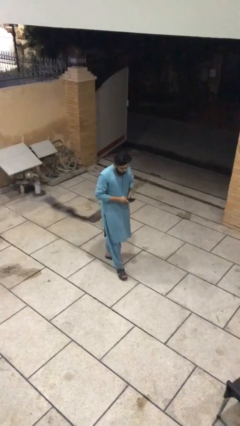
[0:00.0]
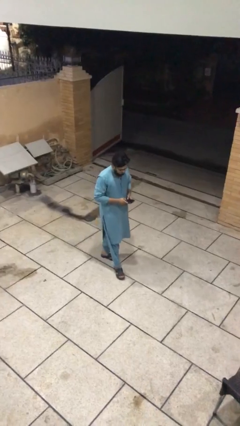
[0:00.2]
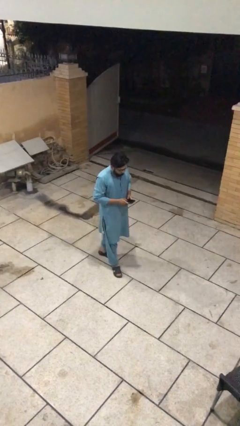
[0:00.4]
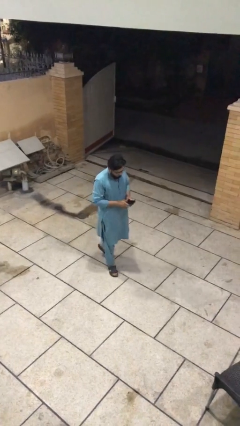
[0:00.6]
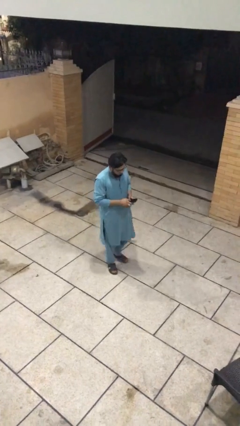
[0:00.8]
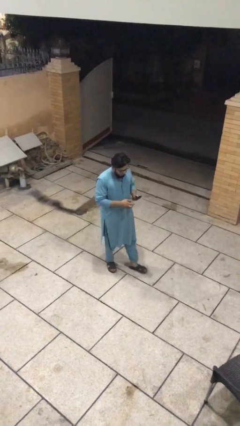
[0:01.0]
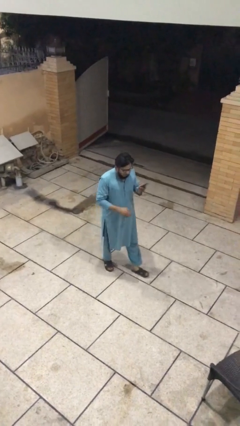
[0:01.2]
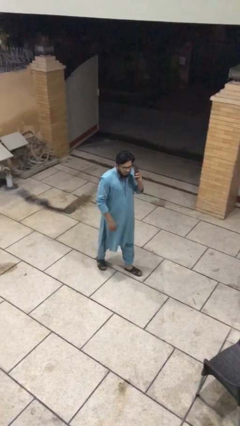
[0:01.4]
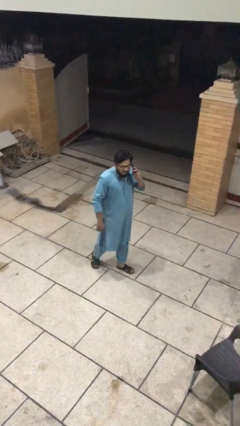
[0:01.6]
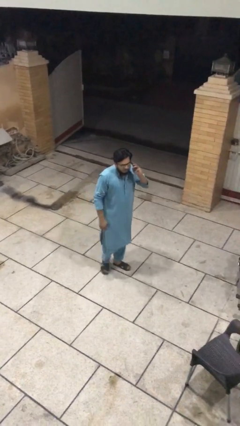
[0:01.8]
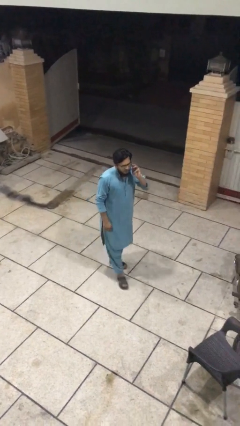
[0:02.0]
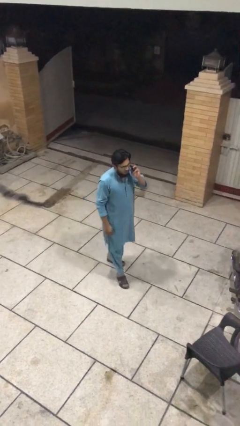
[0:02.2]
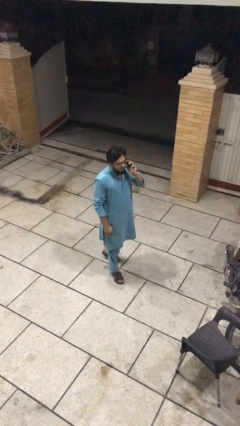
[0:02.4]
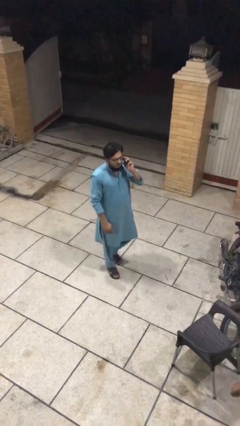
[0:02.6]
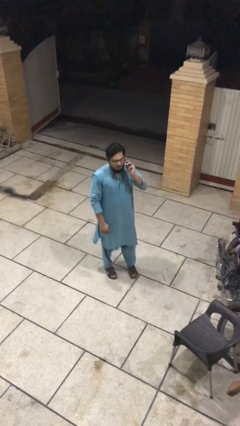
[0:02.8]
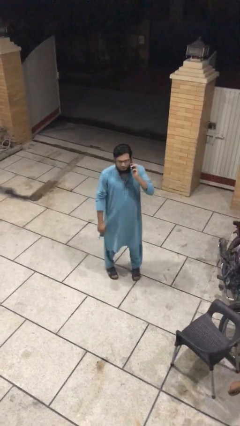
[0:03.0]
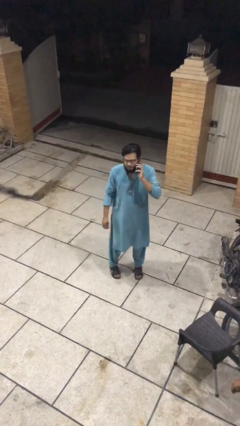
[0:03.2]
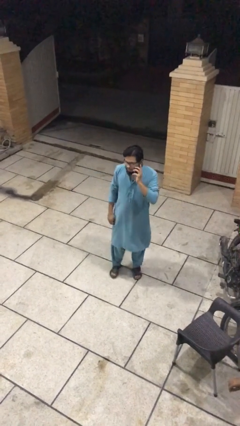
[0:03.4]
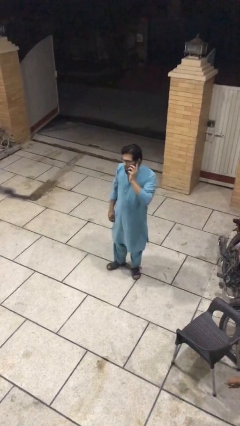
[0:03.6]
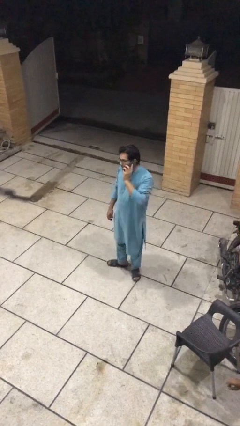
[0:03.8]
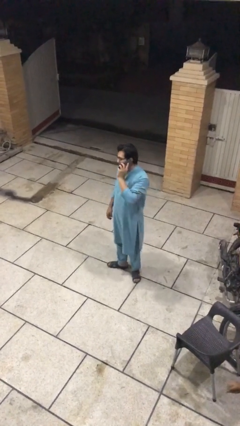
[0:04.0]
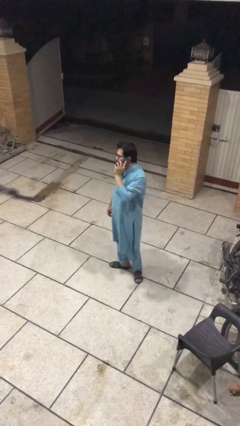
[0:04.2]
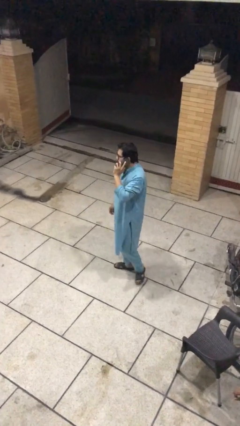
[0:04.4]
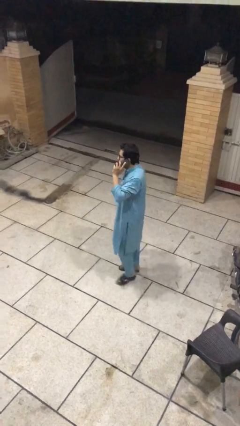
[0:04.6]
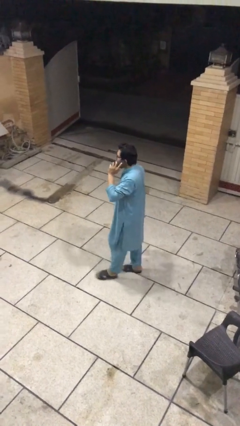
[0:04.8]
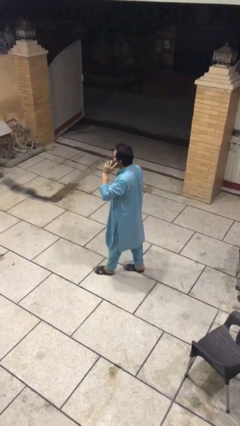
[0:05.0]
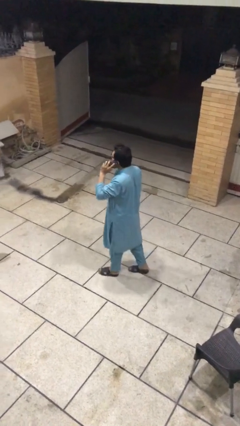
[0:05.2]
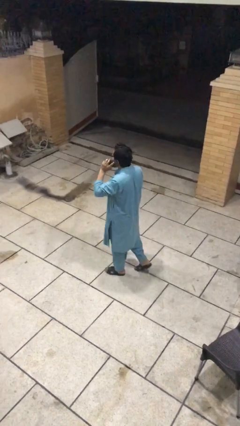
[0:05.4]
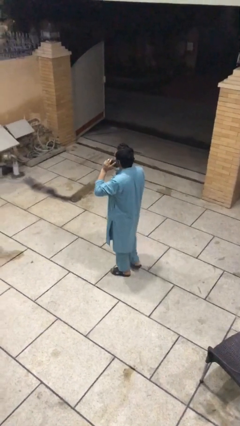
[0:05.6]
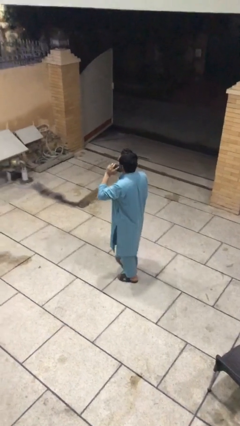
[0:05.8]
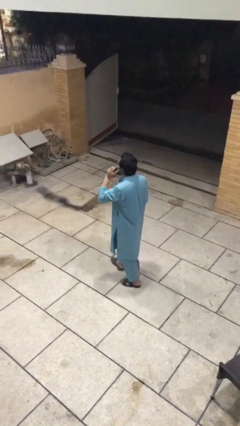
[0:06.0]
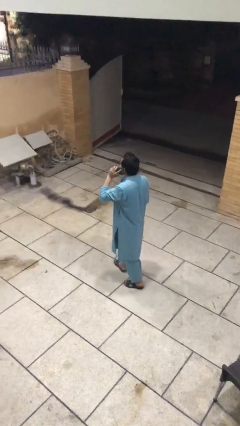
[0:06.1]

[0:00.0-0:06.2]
person talks on phone

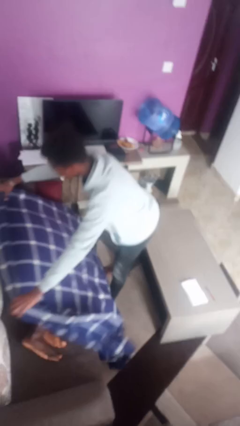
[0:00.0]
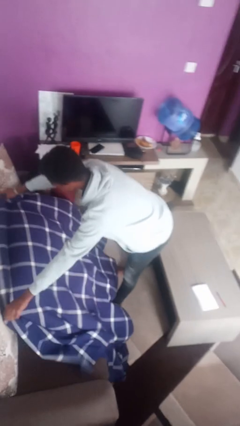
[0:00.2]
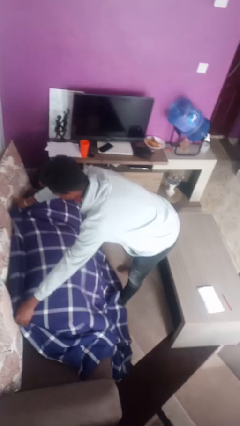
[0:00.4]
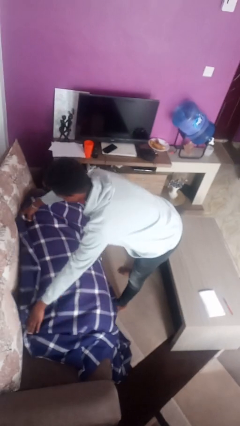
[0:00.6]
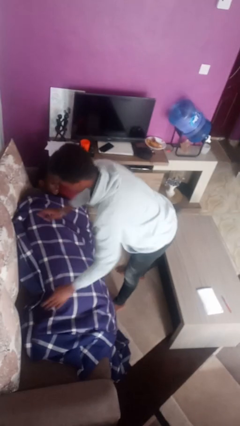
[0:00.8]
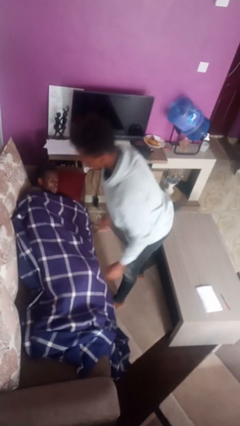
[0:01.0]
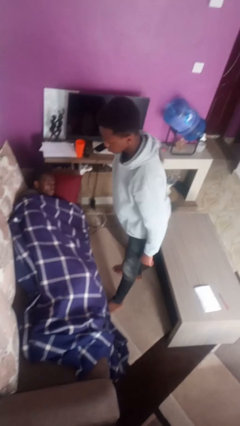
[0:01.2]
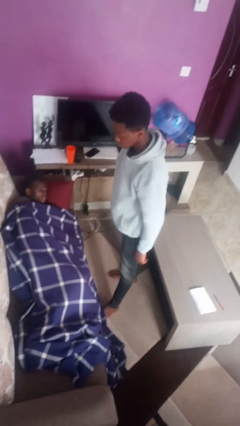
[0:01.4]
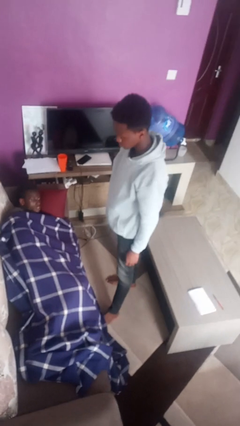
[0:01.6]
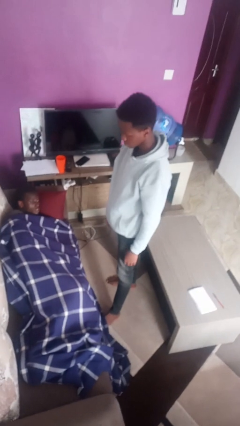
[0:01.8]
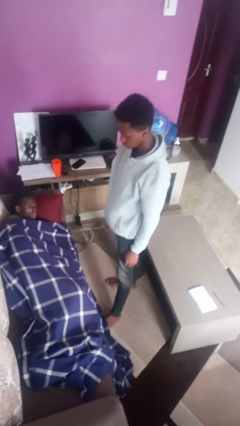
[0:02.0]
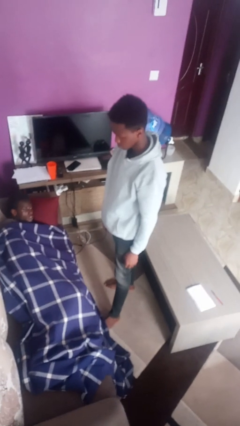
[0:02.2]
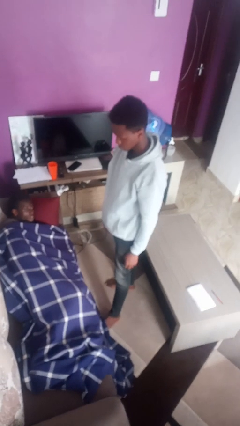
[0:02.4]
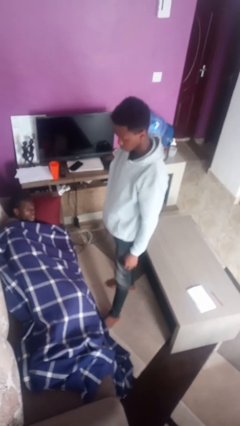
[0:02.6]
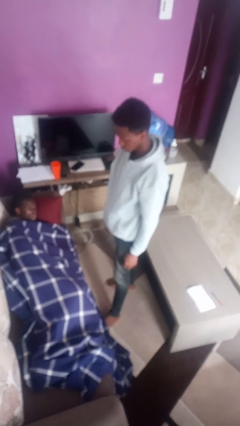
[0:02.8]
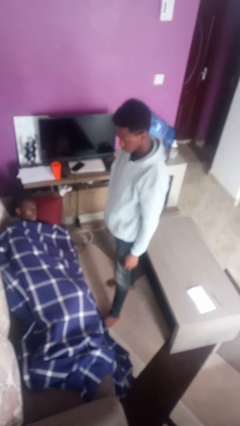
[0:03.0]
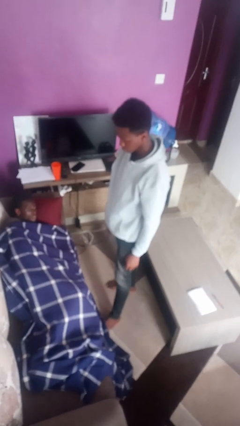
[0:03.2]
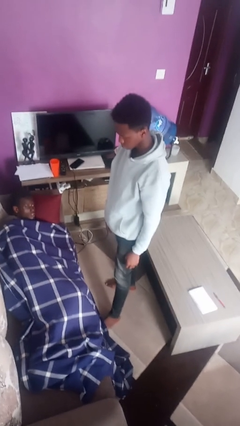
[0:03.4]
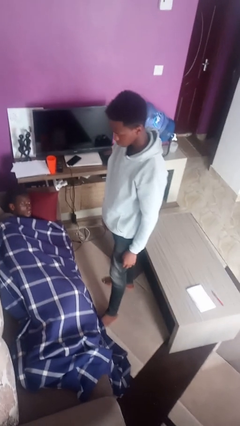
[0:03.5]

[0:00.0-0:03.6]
person covers friend with blanket

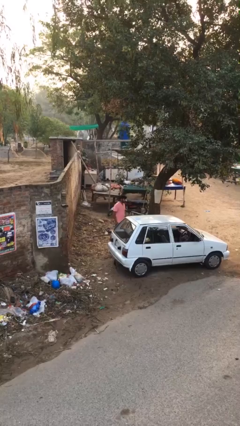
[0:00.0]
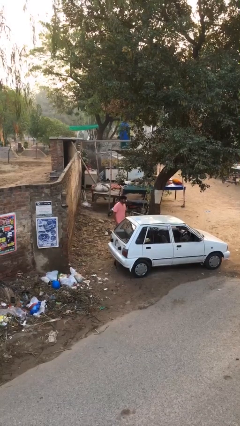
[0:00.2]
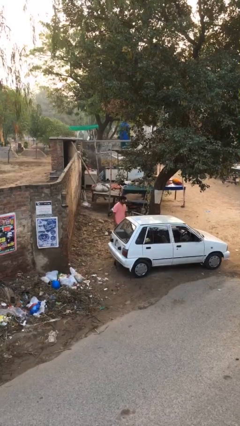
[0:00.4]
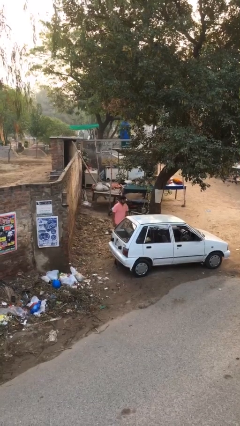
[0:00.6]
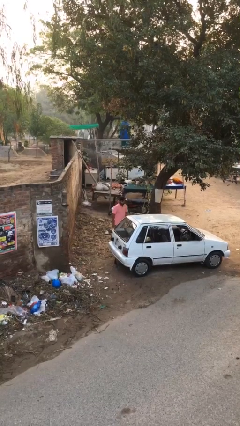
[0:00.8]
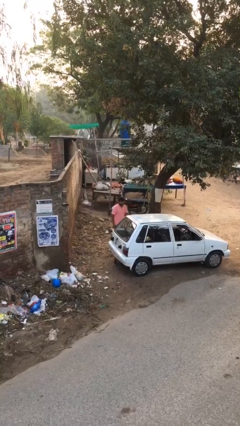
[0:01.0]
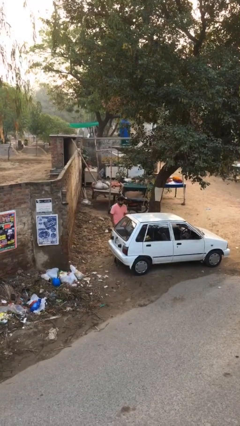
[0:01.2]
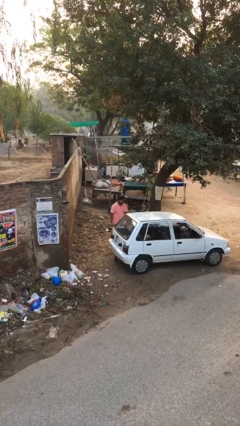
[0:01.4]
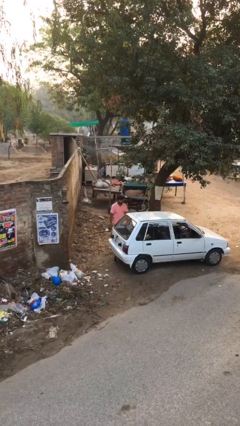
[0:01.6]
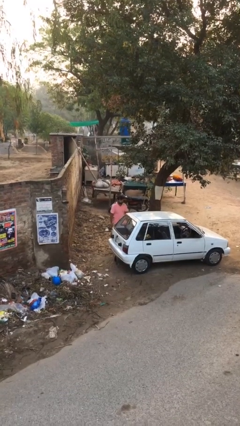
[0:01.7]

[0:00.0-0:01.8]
person closes car door

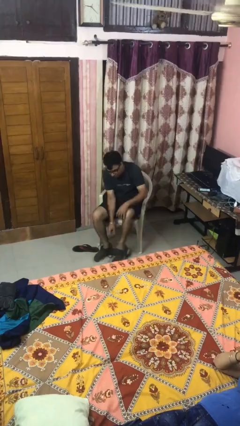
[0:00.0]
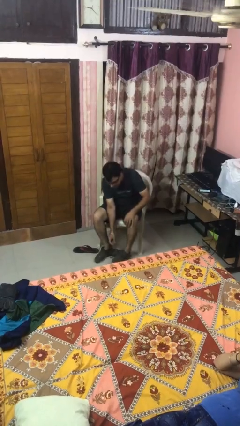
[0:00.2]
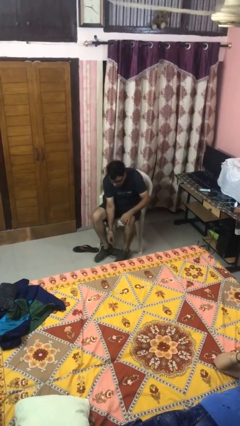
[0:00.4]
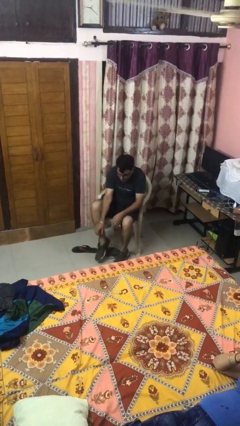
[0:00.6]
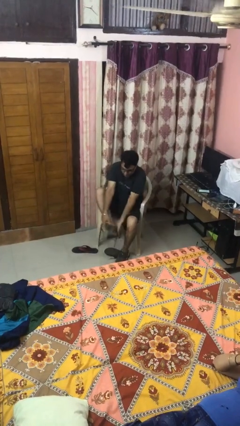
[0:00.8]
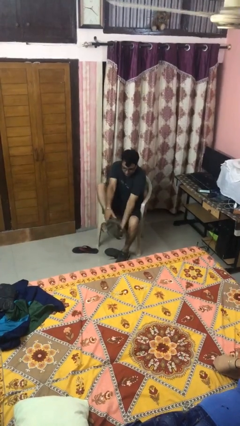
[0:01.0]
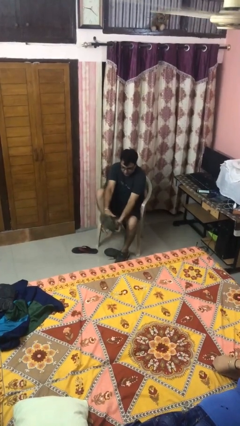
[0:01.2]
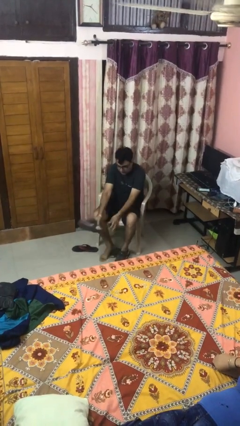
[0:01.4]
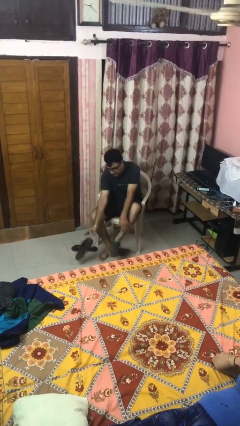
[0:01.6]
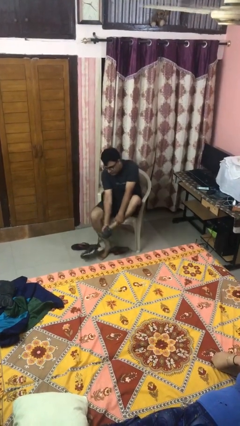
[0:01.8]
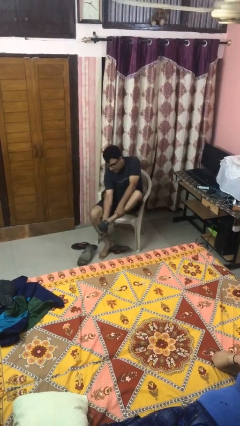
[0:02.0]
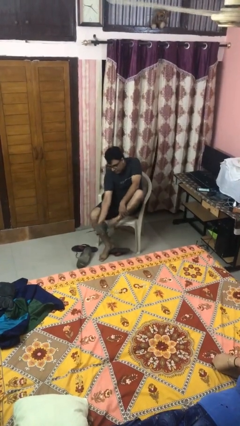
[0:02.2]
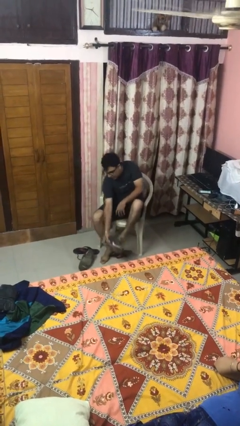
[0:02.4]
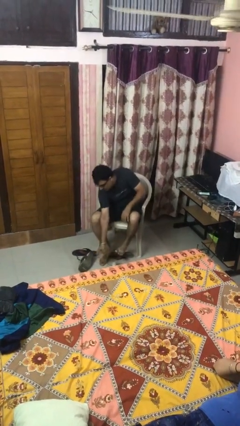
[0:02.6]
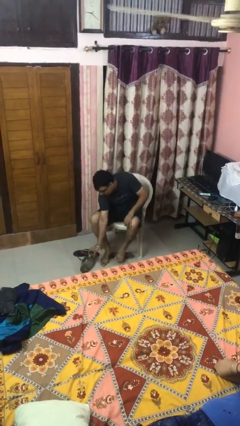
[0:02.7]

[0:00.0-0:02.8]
person takes off shoes

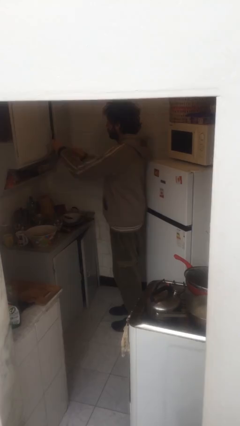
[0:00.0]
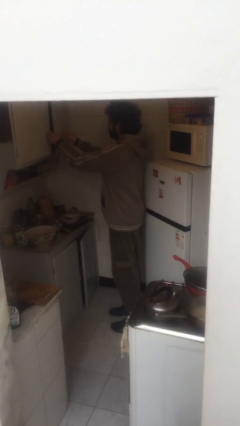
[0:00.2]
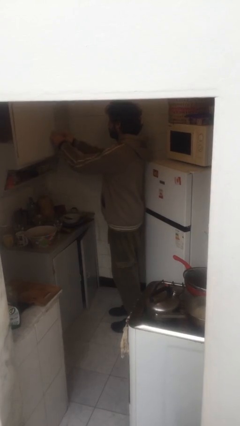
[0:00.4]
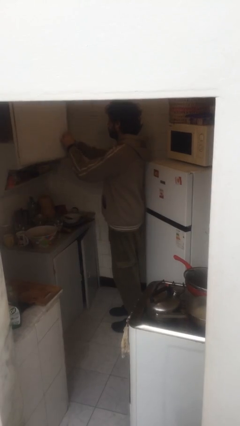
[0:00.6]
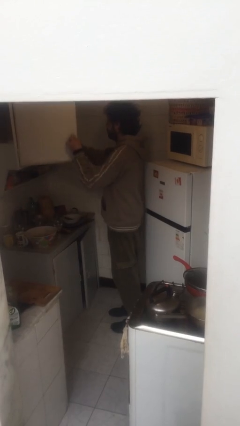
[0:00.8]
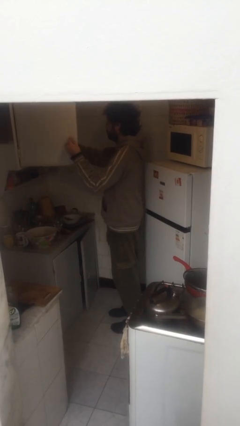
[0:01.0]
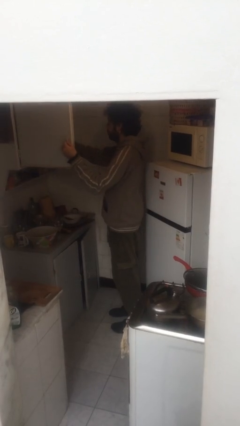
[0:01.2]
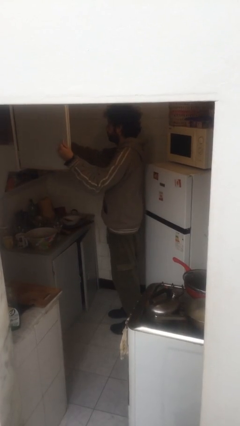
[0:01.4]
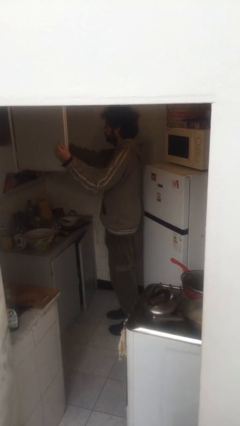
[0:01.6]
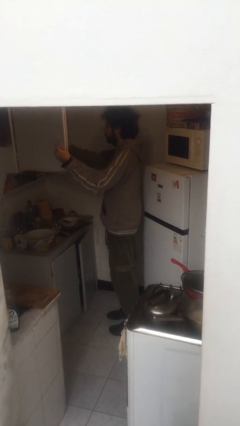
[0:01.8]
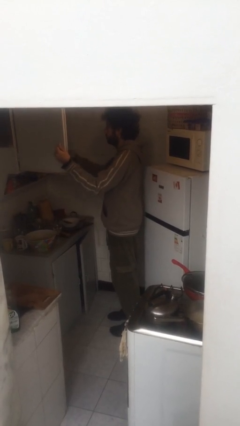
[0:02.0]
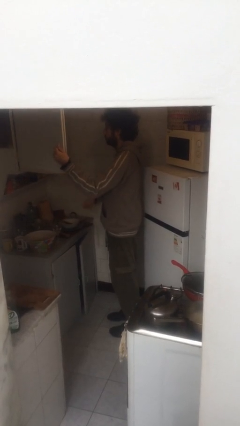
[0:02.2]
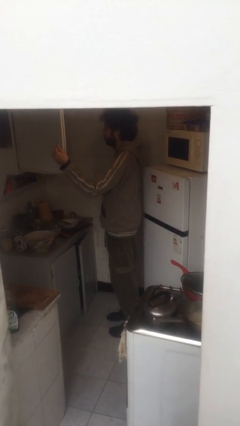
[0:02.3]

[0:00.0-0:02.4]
person opens cabinet

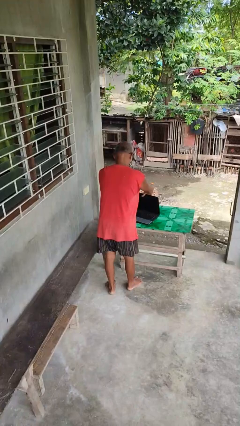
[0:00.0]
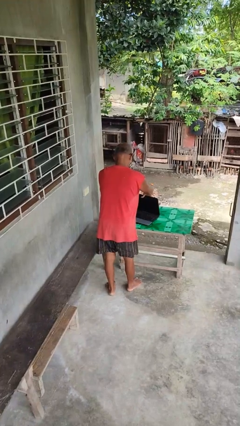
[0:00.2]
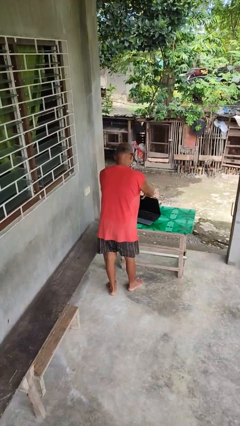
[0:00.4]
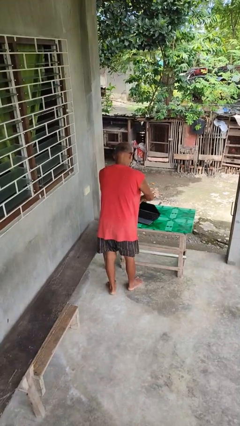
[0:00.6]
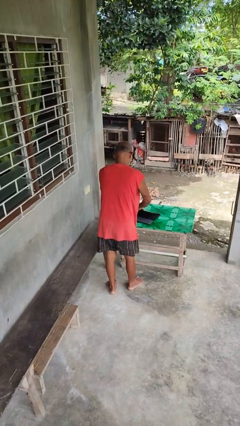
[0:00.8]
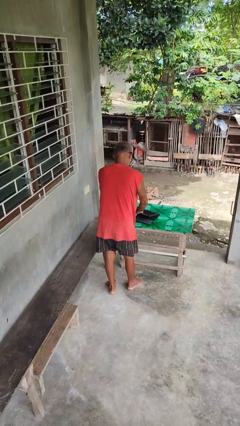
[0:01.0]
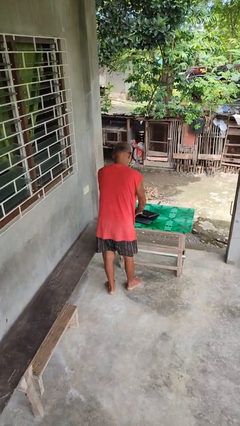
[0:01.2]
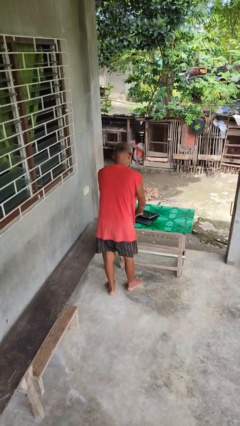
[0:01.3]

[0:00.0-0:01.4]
person closes laptop
